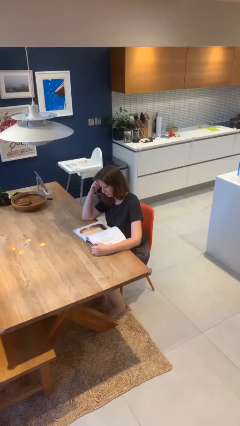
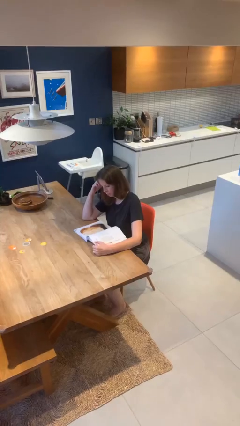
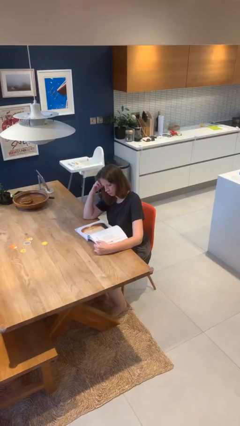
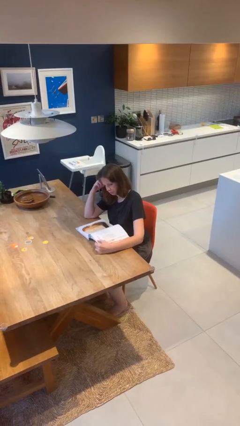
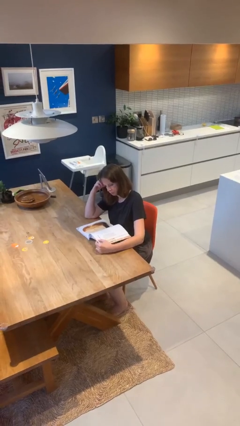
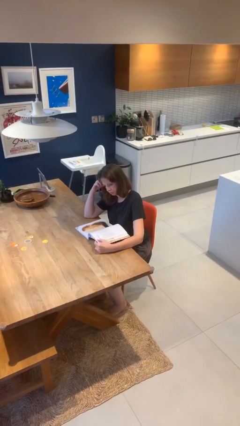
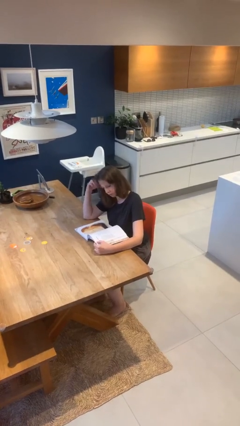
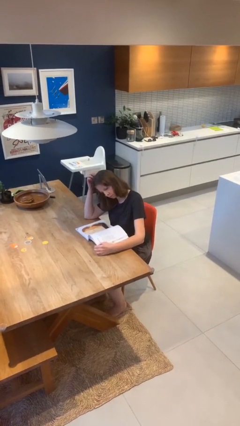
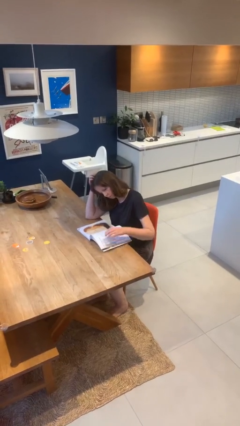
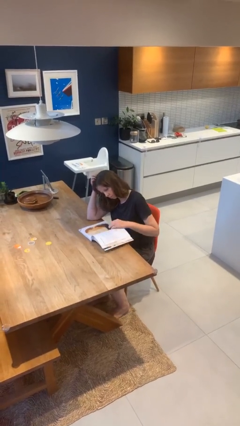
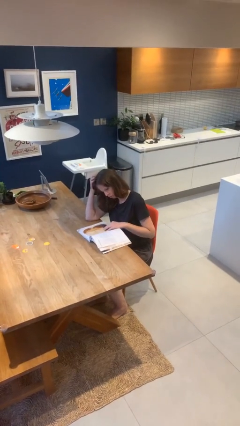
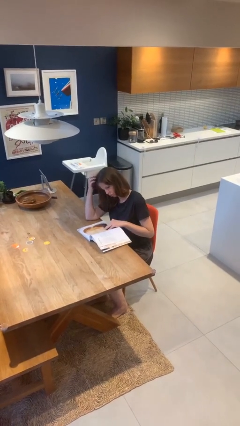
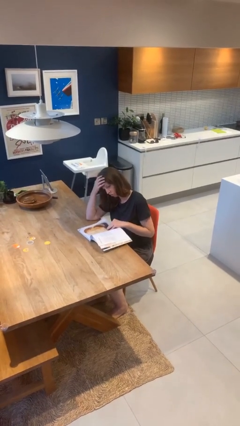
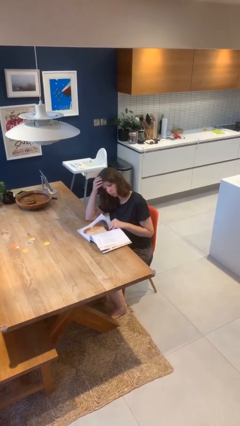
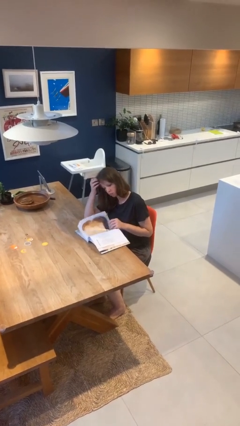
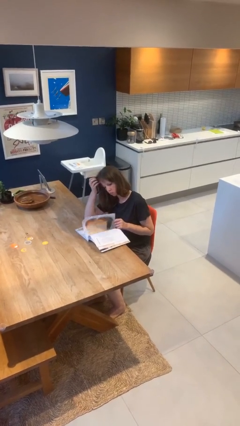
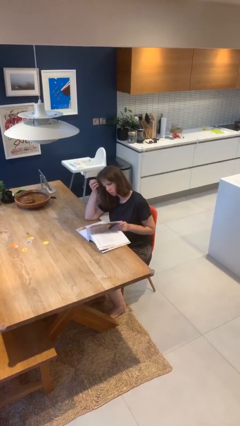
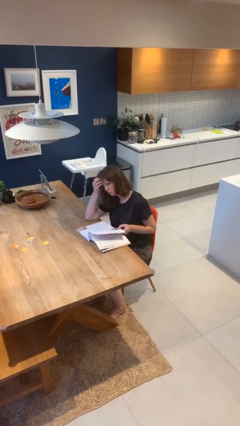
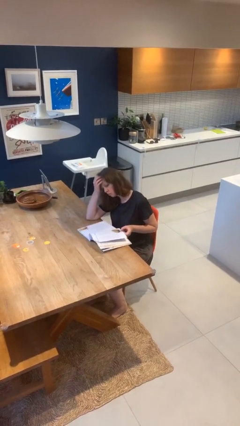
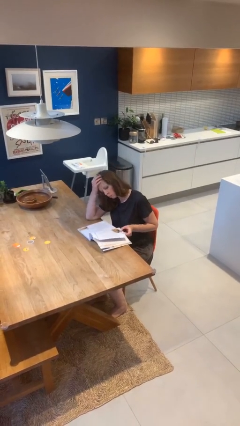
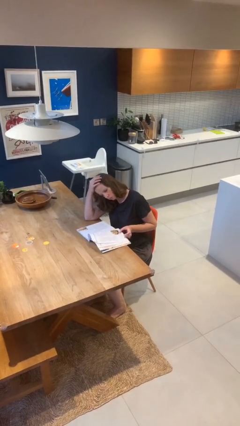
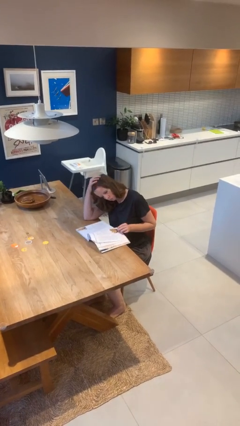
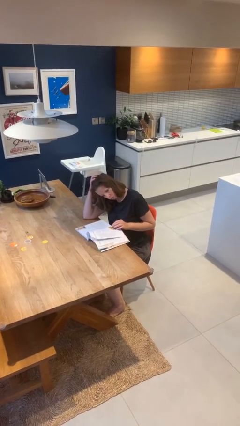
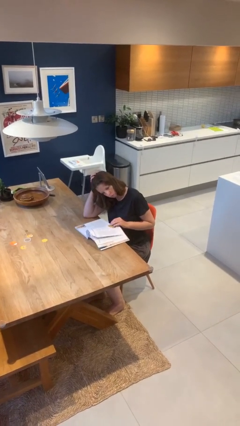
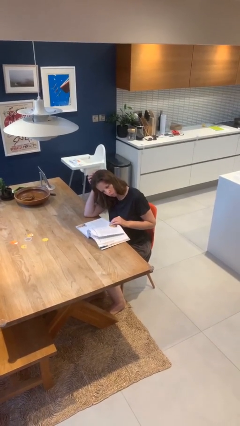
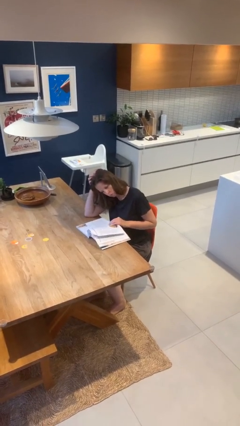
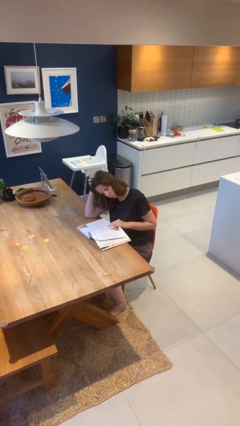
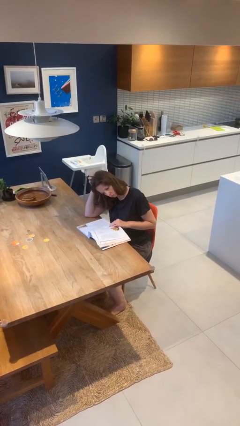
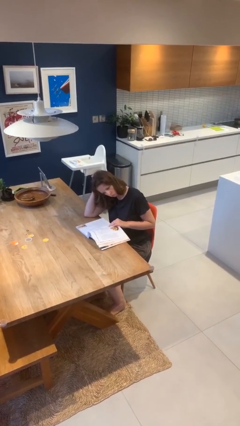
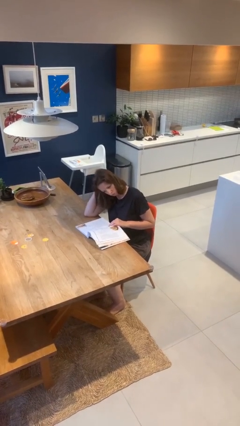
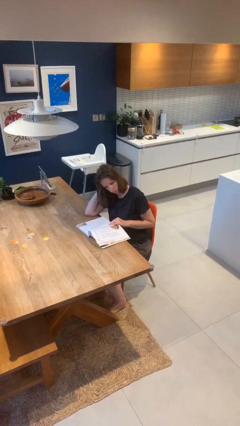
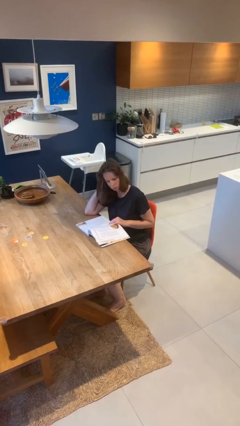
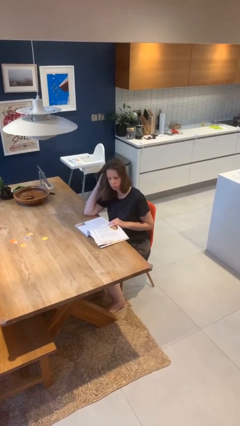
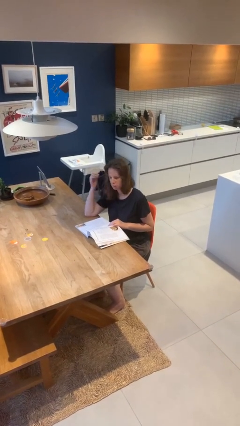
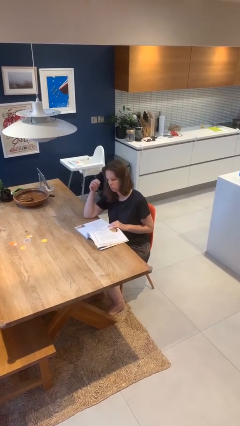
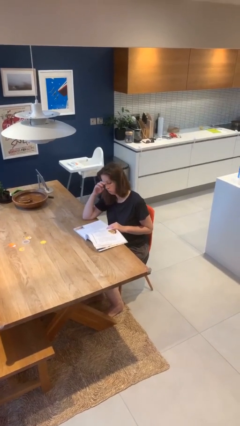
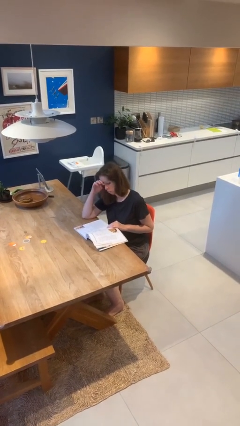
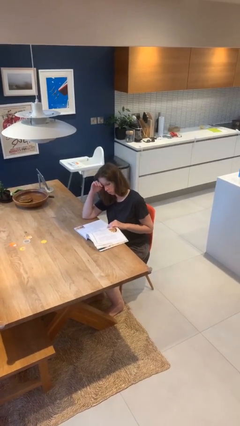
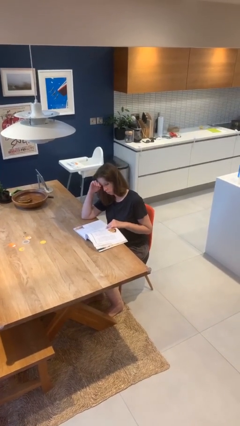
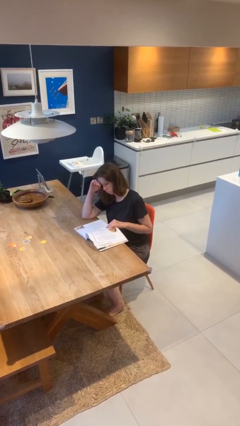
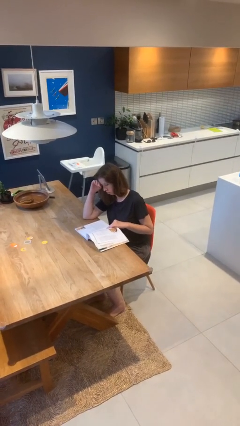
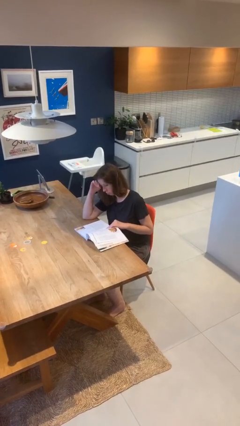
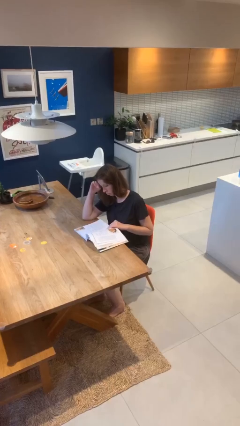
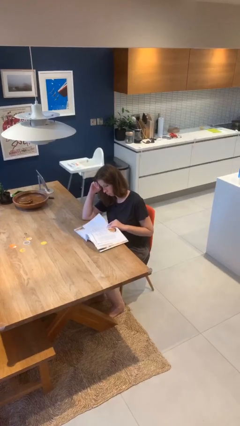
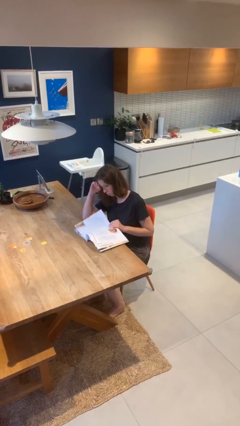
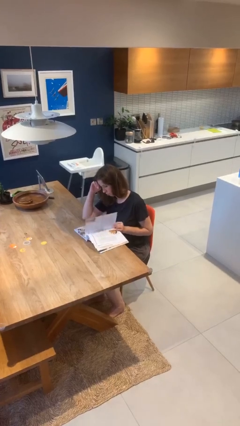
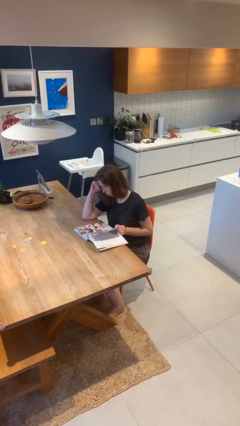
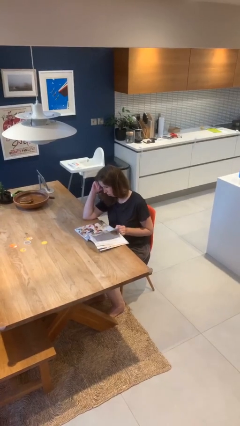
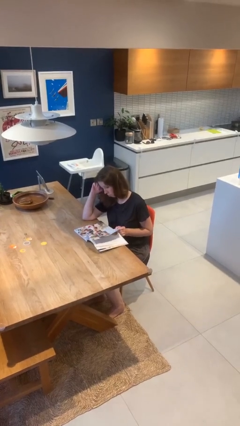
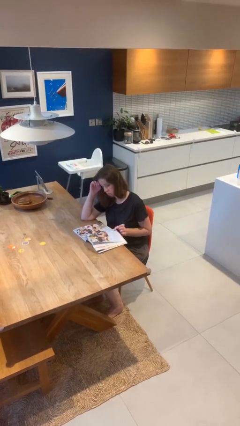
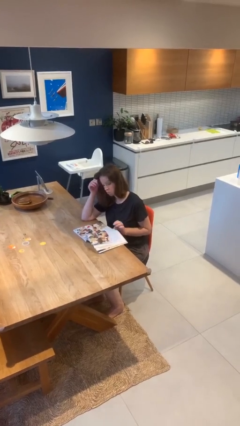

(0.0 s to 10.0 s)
person reads document

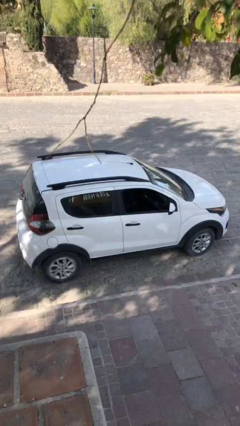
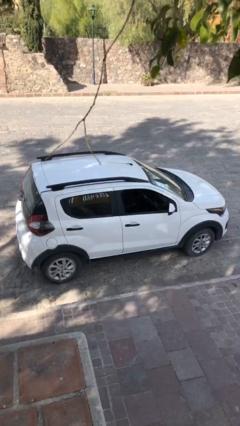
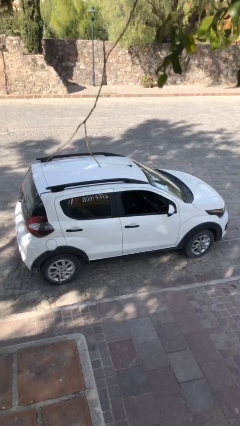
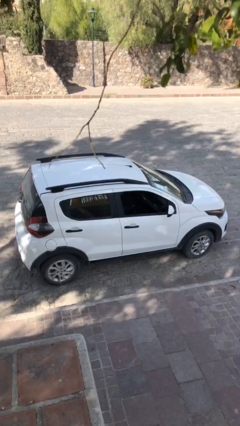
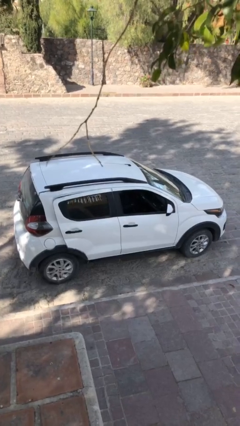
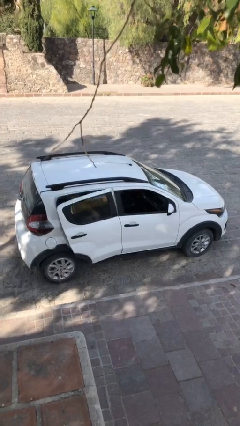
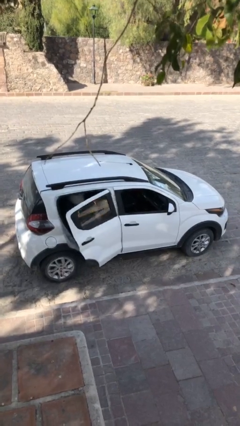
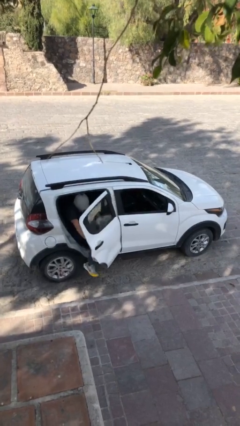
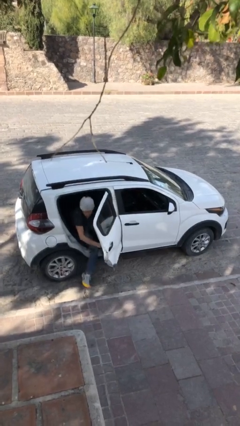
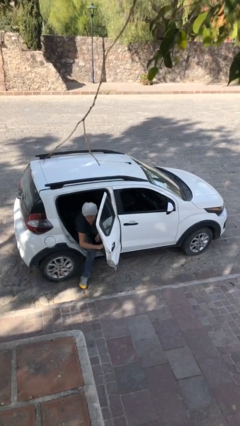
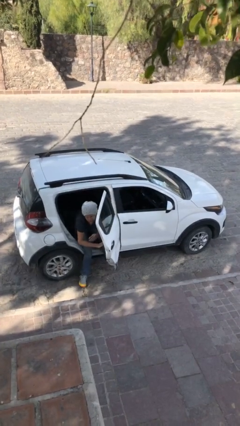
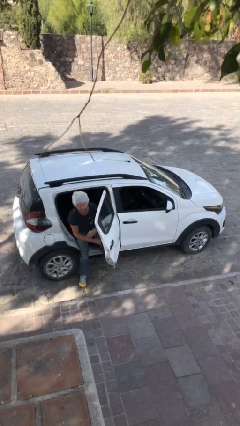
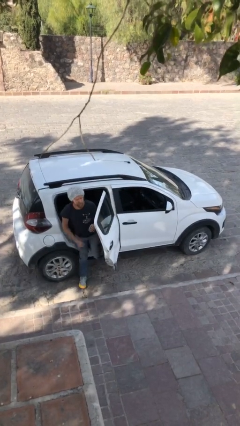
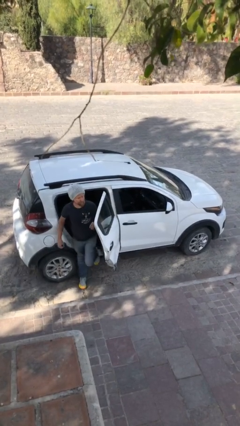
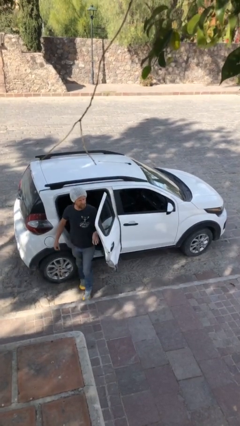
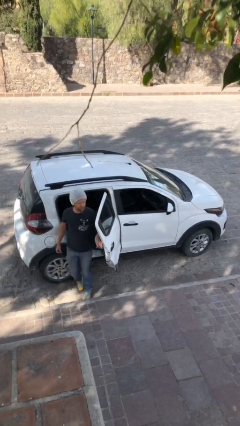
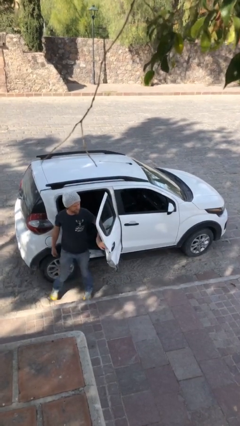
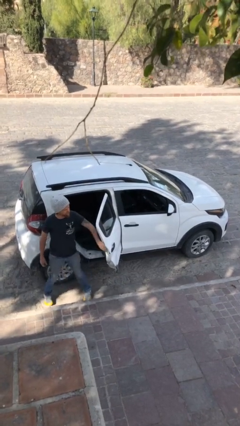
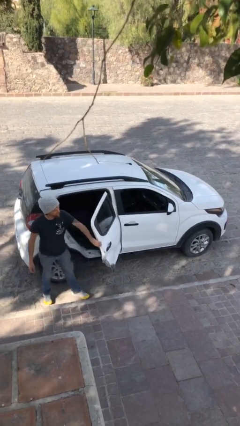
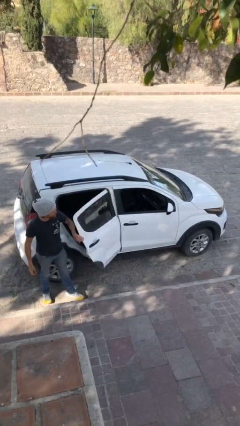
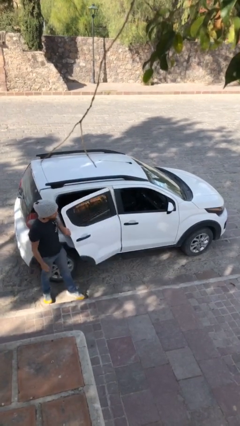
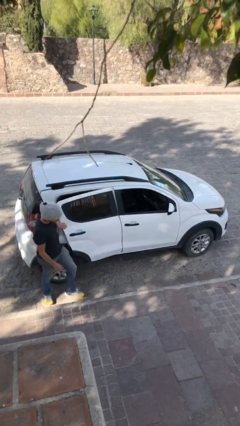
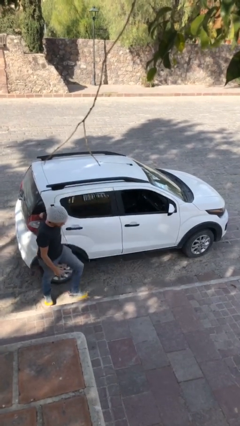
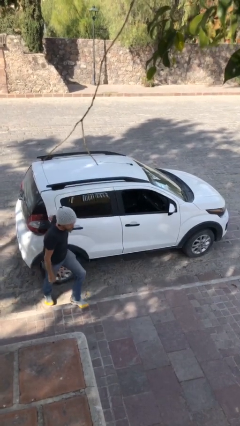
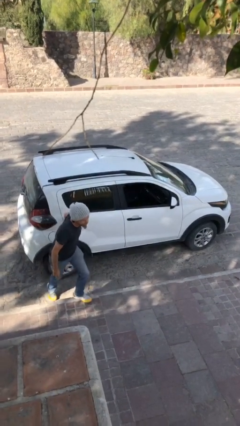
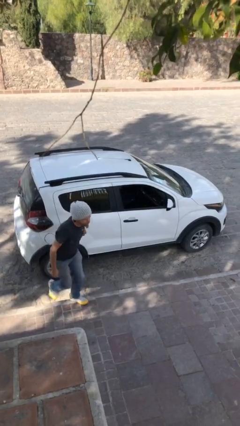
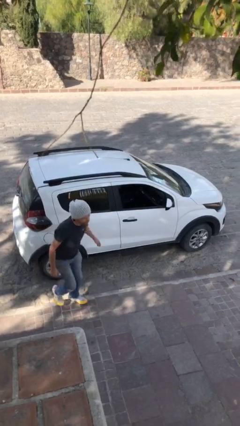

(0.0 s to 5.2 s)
car drops off person

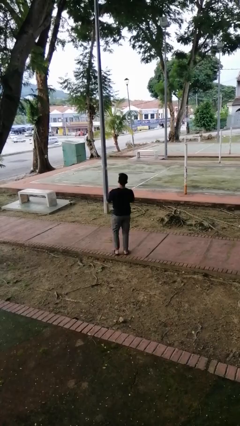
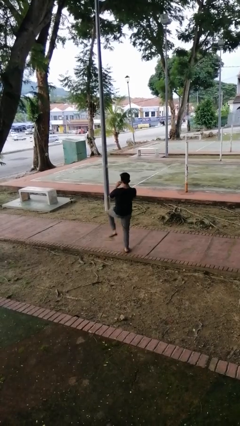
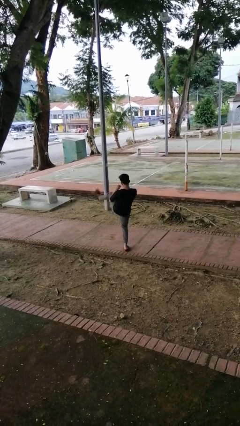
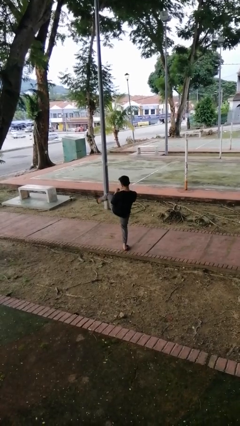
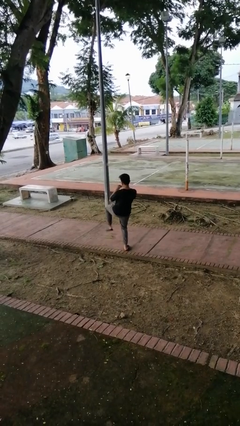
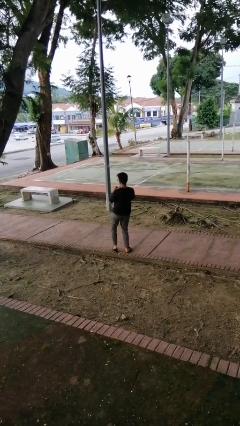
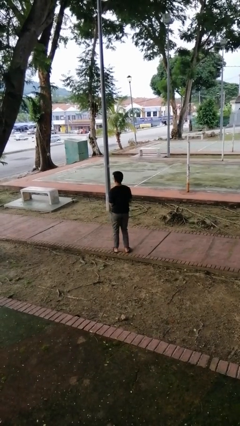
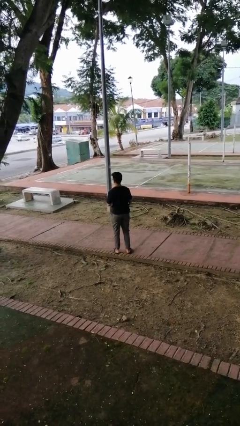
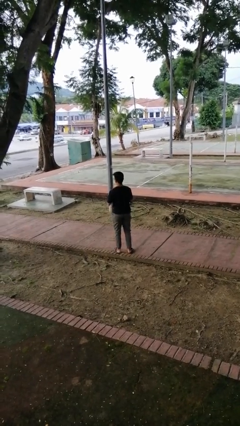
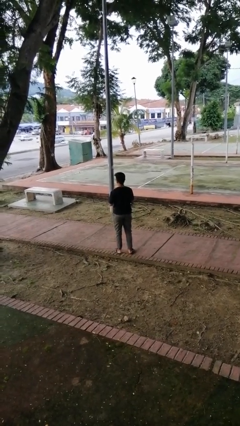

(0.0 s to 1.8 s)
person karate kicks

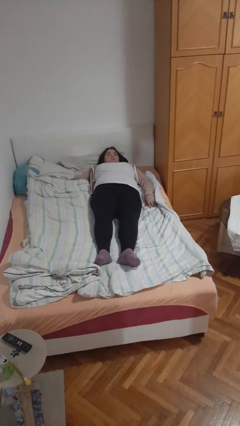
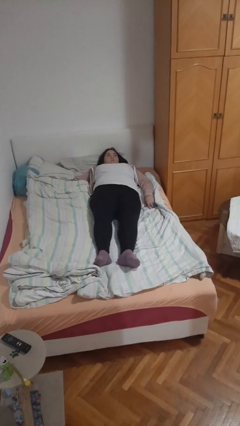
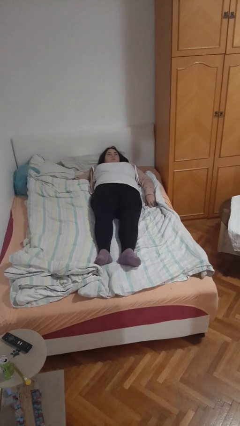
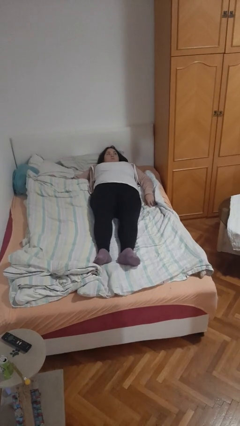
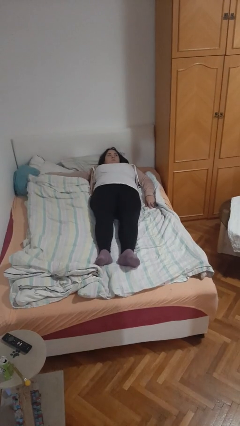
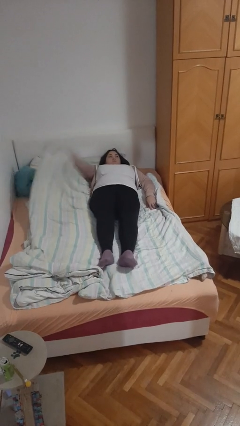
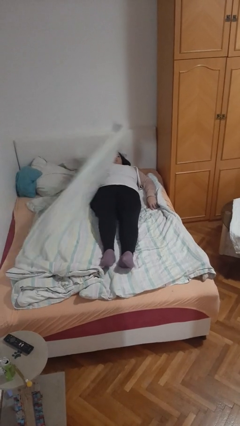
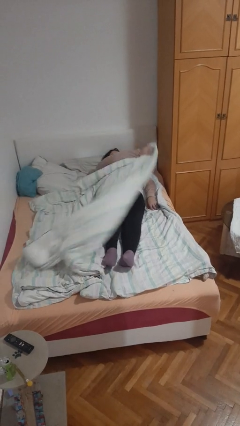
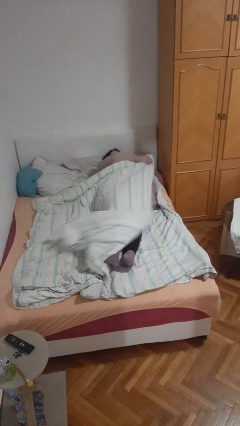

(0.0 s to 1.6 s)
person covers with bedsheets
